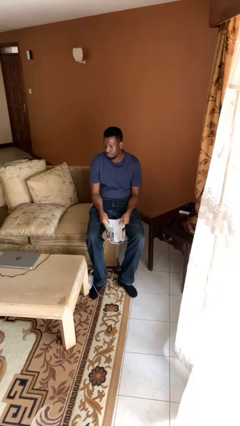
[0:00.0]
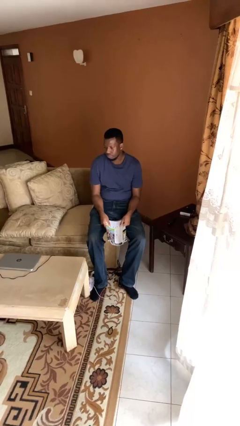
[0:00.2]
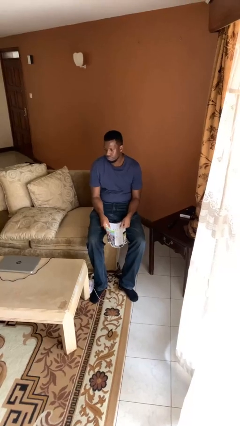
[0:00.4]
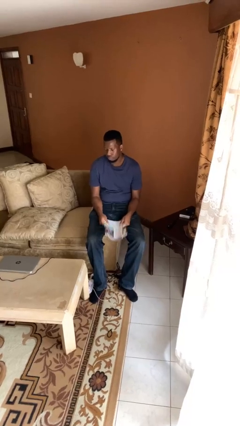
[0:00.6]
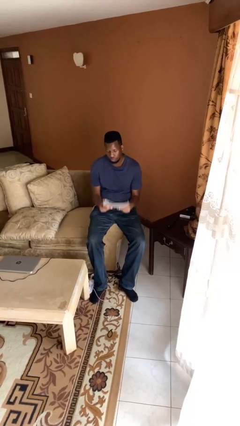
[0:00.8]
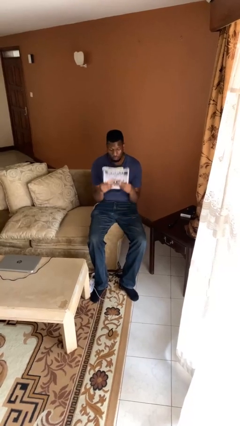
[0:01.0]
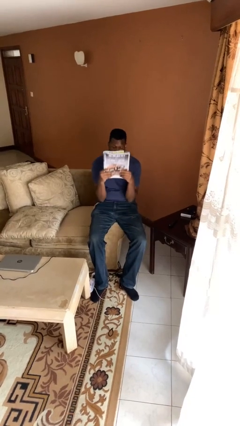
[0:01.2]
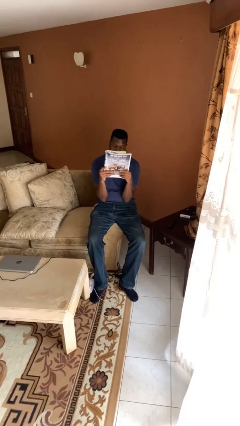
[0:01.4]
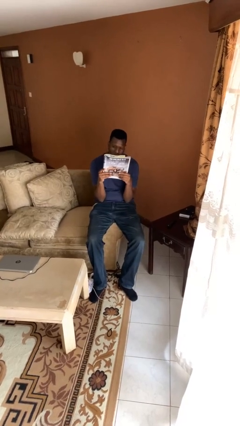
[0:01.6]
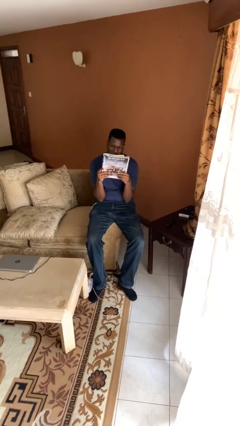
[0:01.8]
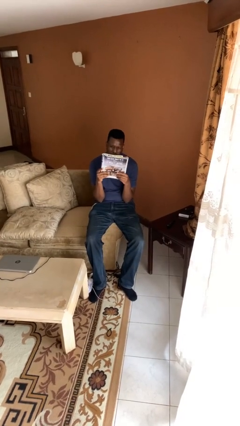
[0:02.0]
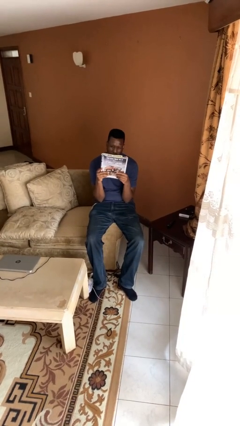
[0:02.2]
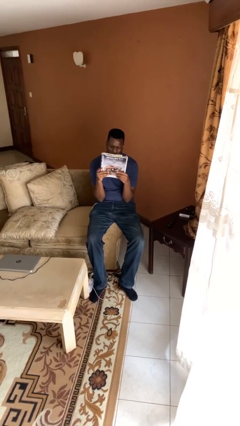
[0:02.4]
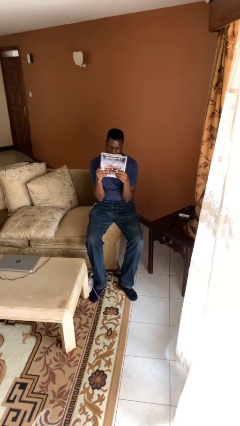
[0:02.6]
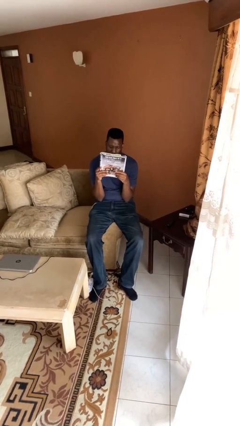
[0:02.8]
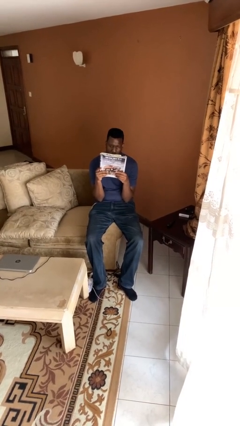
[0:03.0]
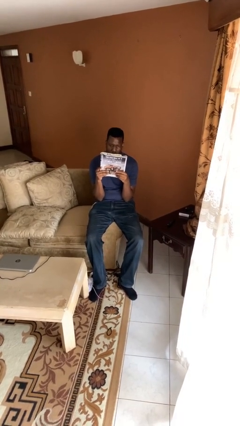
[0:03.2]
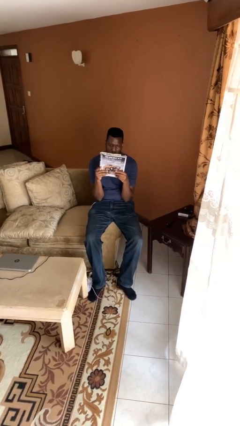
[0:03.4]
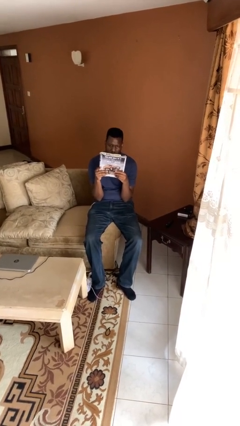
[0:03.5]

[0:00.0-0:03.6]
person reads document

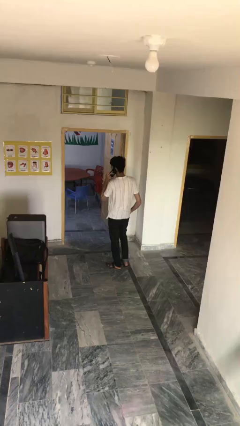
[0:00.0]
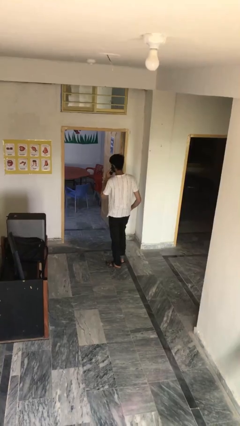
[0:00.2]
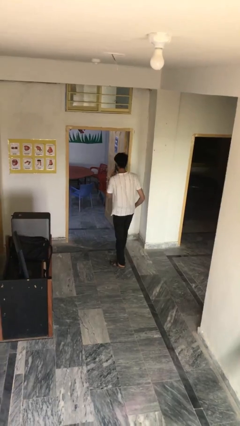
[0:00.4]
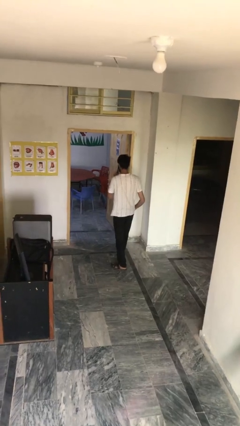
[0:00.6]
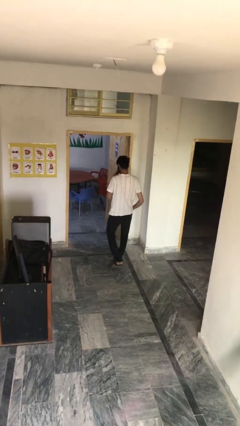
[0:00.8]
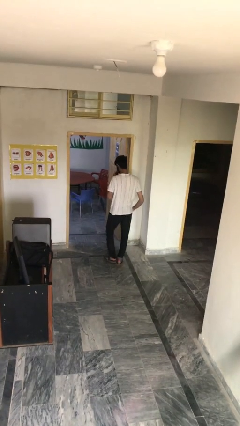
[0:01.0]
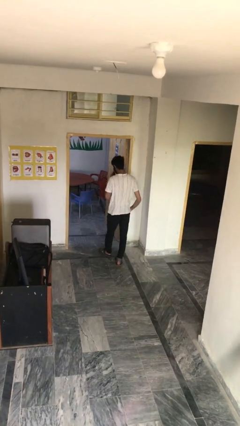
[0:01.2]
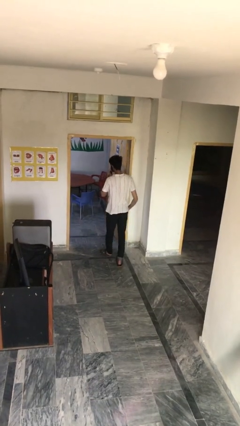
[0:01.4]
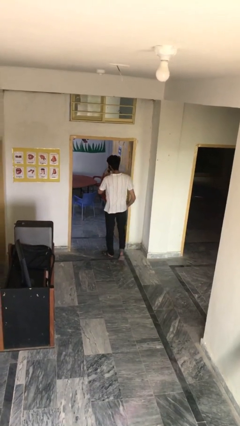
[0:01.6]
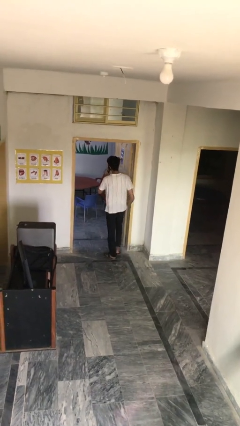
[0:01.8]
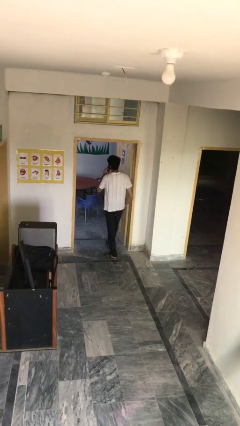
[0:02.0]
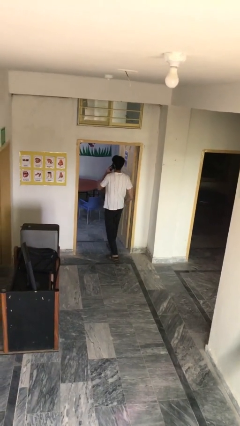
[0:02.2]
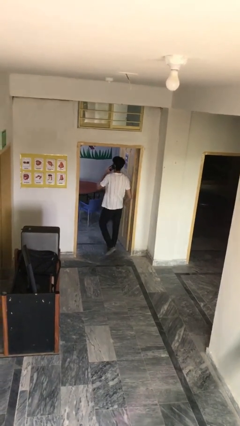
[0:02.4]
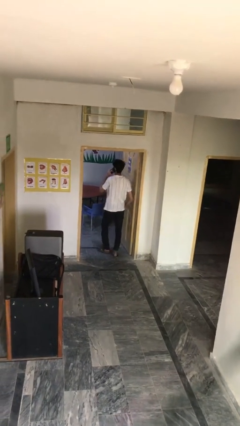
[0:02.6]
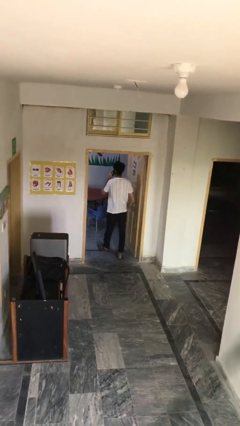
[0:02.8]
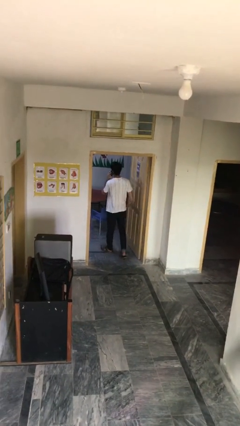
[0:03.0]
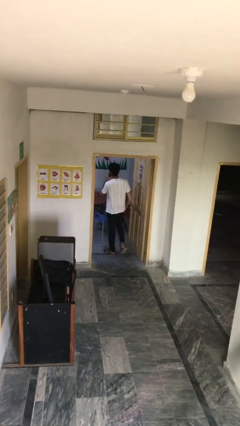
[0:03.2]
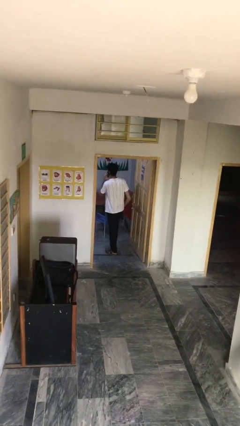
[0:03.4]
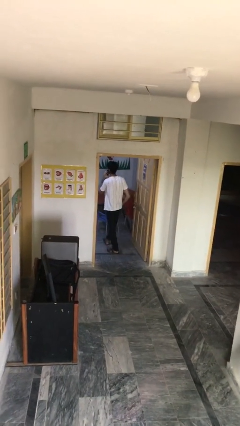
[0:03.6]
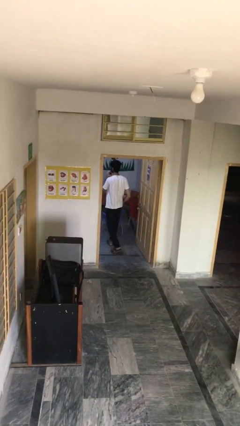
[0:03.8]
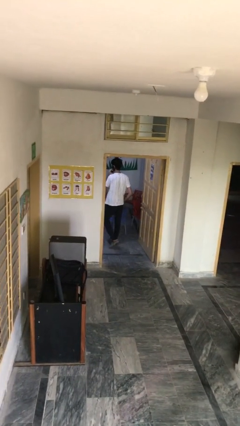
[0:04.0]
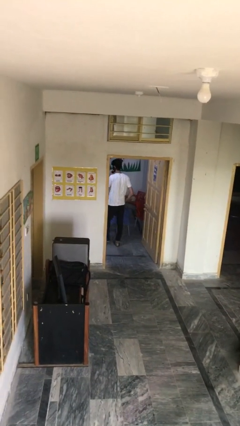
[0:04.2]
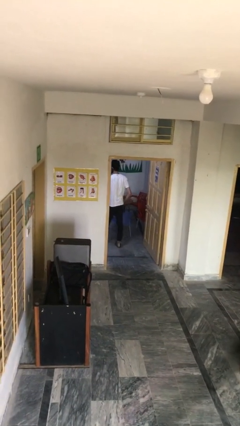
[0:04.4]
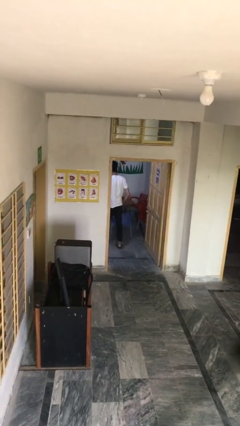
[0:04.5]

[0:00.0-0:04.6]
person exits scene through structure

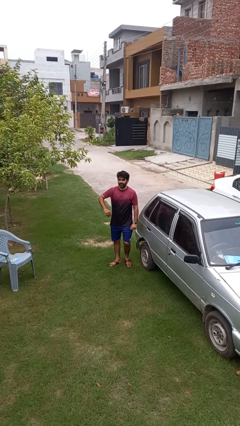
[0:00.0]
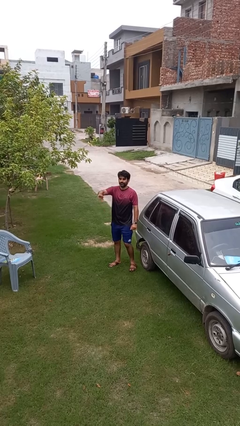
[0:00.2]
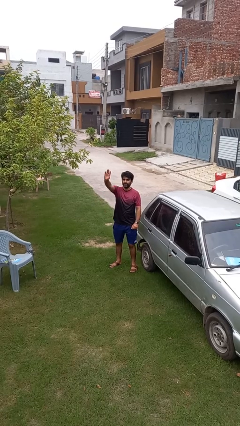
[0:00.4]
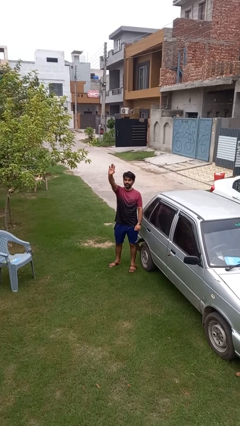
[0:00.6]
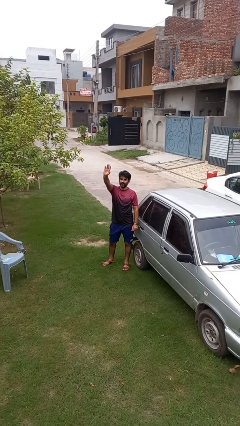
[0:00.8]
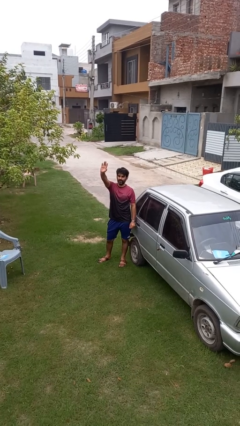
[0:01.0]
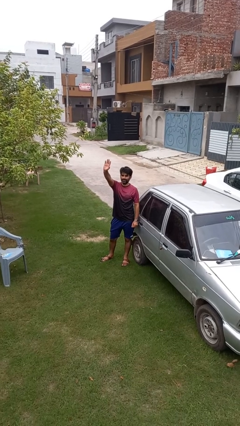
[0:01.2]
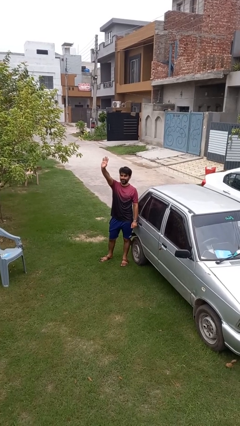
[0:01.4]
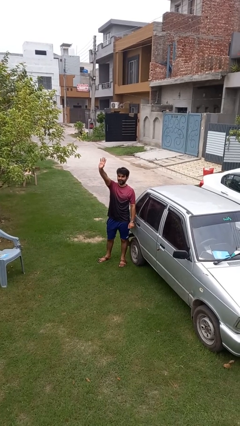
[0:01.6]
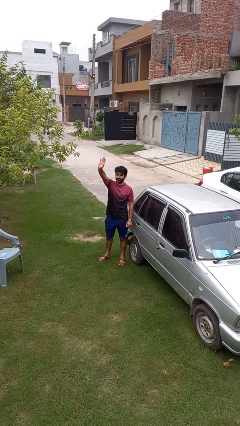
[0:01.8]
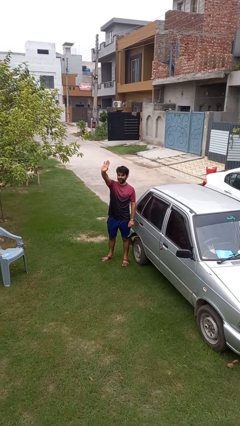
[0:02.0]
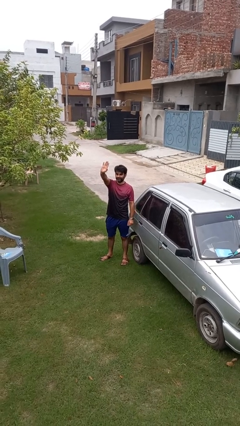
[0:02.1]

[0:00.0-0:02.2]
person gestures raise hand

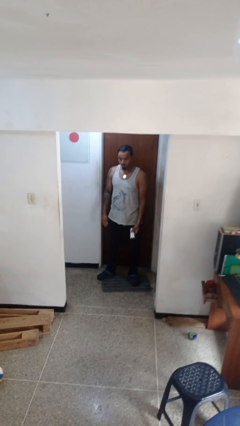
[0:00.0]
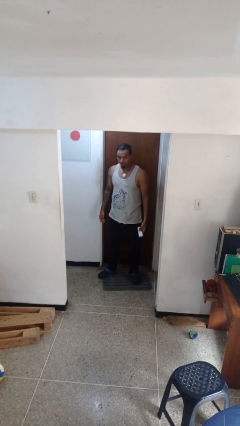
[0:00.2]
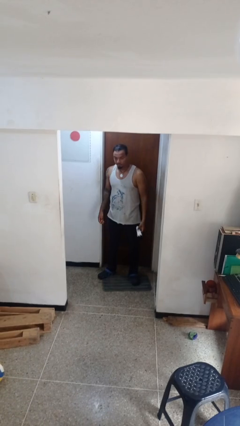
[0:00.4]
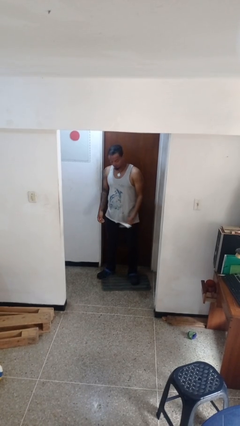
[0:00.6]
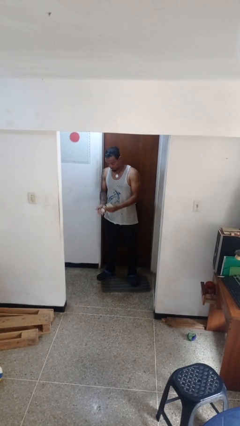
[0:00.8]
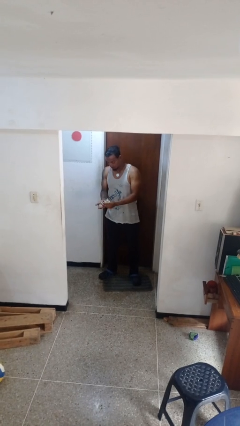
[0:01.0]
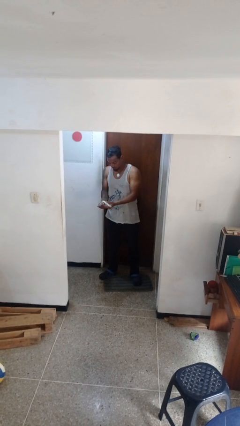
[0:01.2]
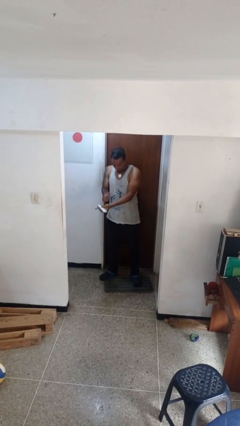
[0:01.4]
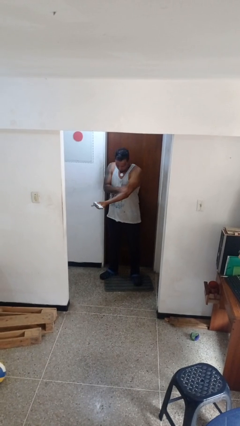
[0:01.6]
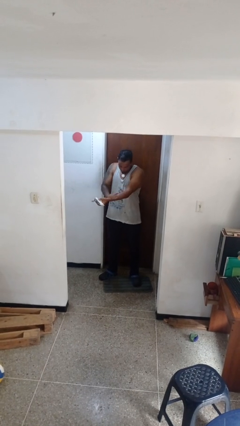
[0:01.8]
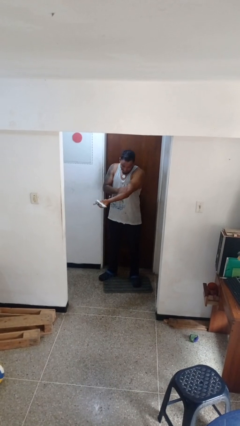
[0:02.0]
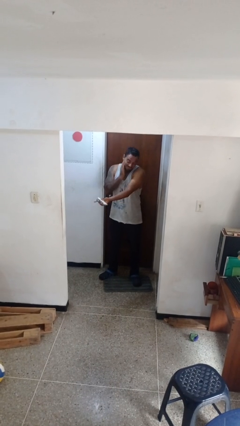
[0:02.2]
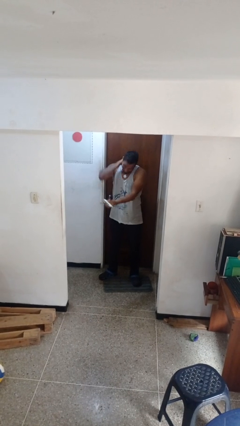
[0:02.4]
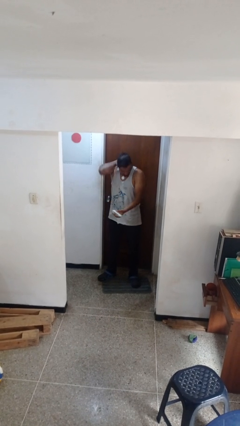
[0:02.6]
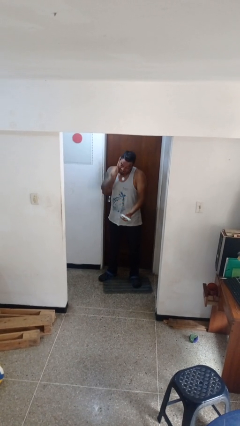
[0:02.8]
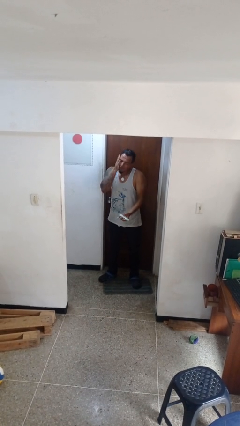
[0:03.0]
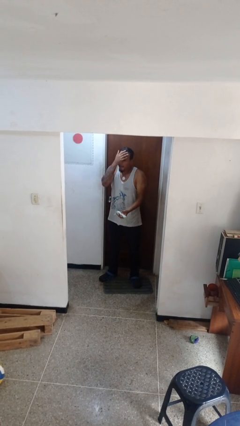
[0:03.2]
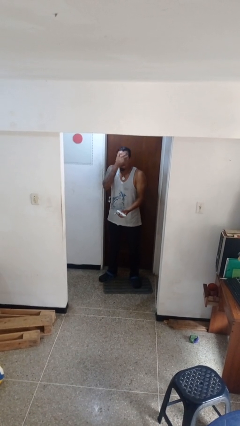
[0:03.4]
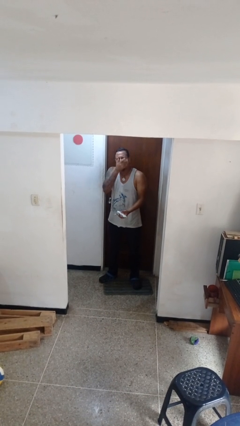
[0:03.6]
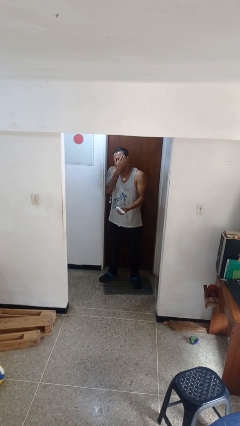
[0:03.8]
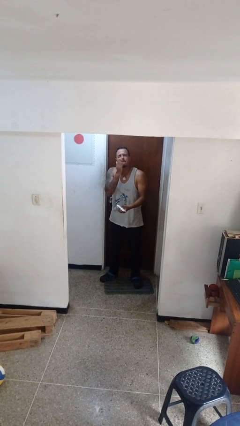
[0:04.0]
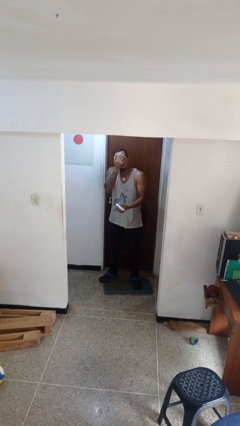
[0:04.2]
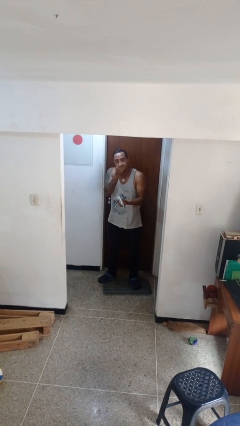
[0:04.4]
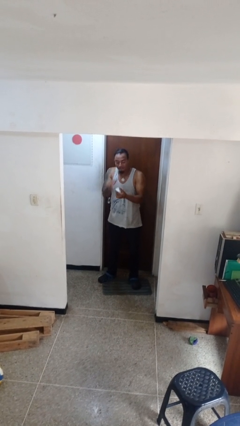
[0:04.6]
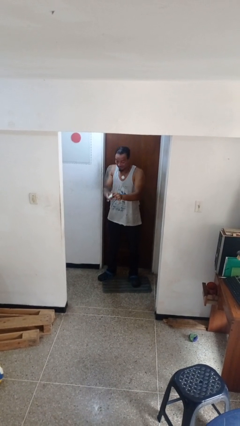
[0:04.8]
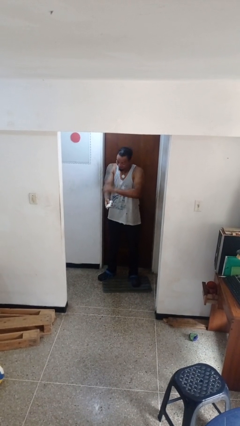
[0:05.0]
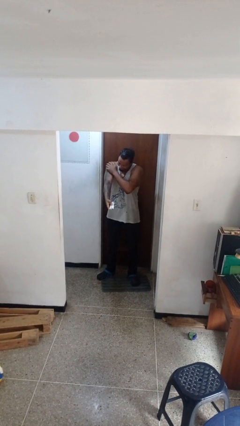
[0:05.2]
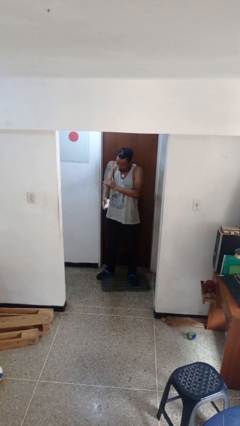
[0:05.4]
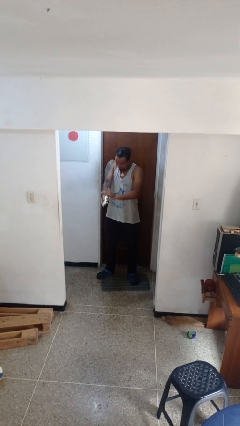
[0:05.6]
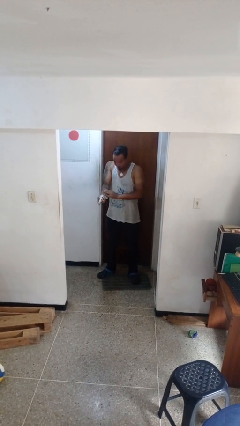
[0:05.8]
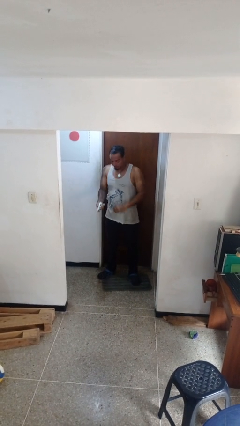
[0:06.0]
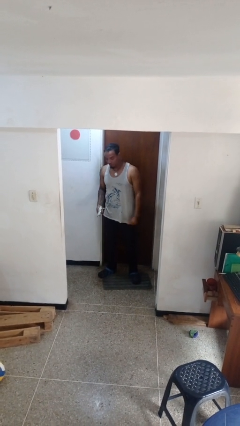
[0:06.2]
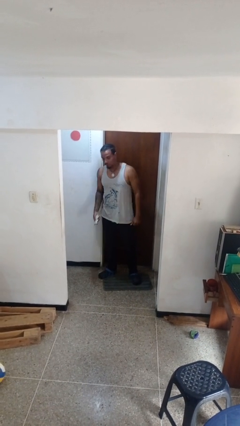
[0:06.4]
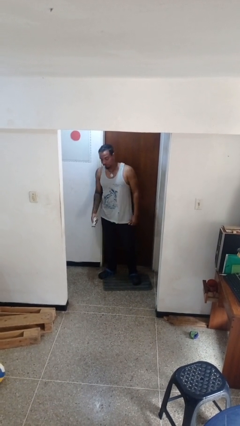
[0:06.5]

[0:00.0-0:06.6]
person applies sunscreen

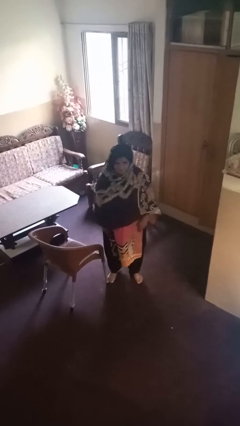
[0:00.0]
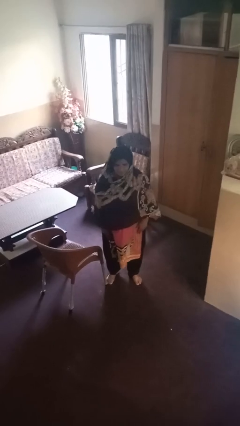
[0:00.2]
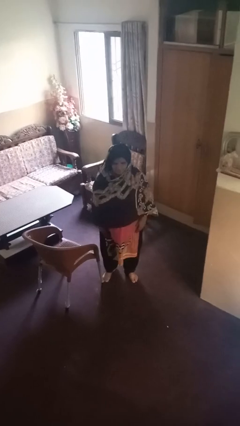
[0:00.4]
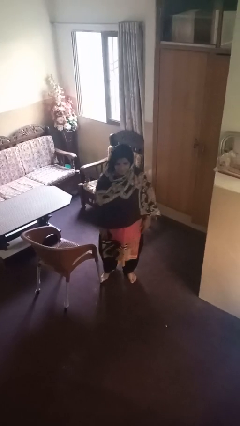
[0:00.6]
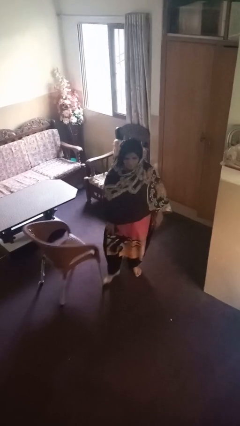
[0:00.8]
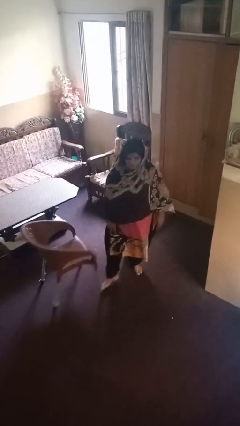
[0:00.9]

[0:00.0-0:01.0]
person trips on object on floor
